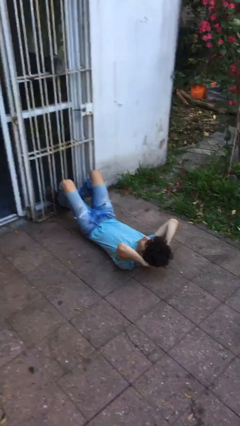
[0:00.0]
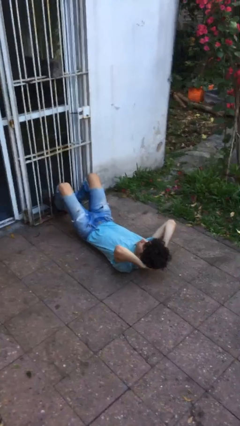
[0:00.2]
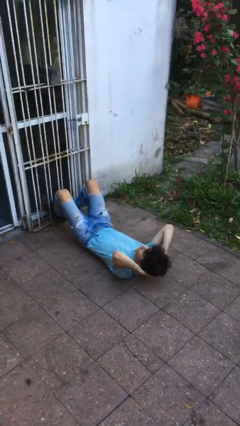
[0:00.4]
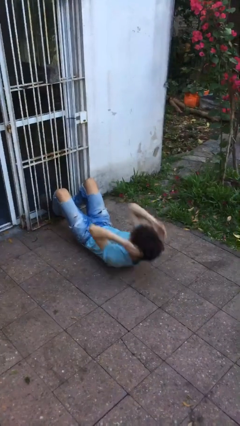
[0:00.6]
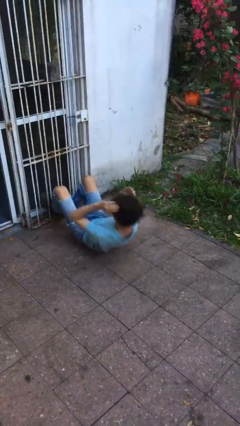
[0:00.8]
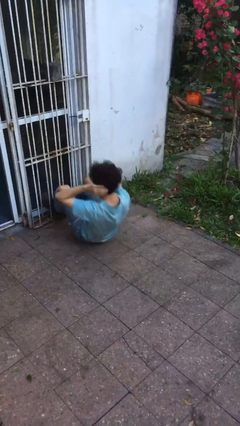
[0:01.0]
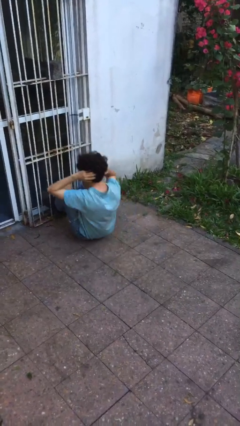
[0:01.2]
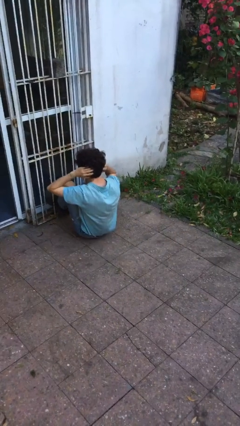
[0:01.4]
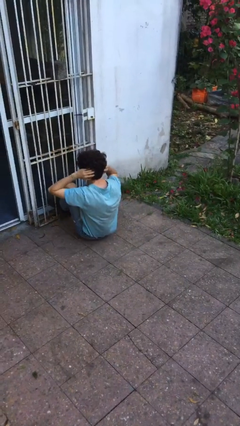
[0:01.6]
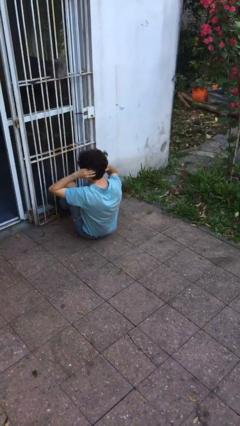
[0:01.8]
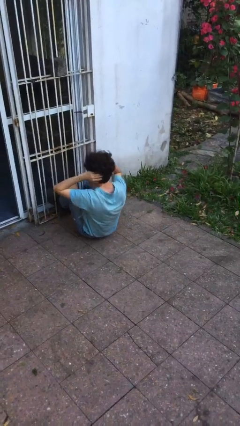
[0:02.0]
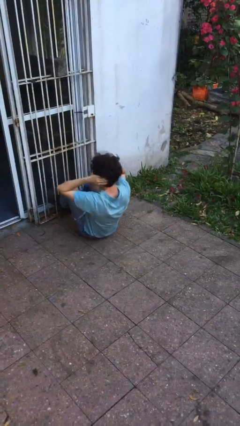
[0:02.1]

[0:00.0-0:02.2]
person exercises with situp

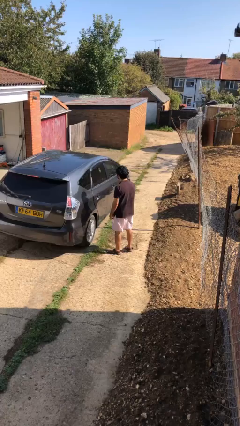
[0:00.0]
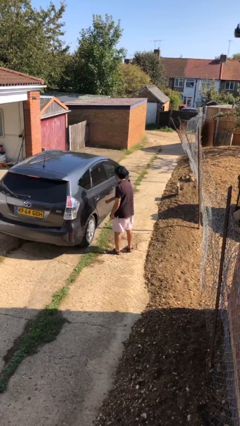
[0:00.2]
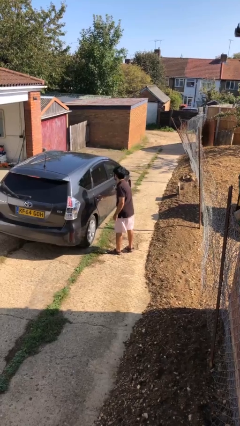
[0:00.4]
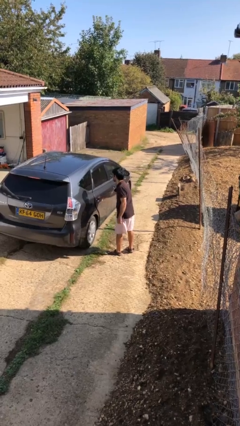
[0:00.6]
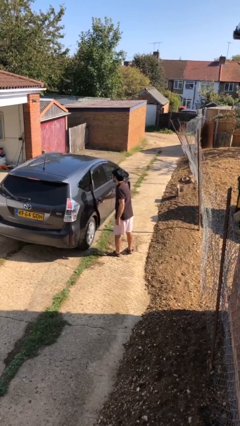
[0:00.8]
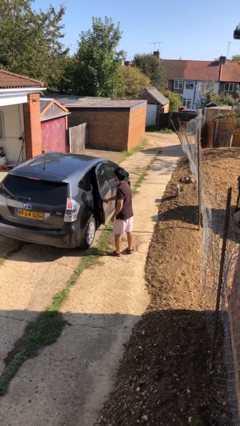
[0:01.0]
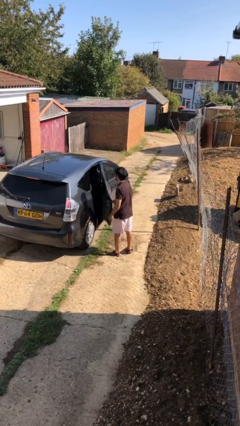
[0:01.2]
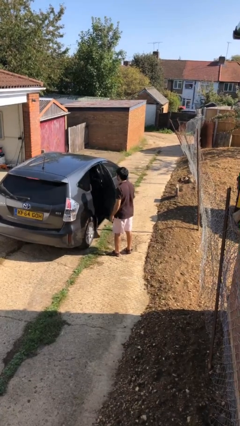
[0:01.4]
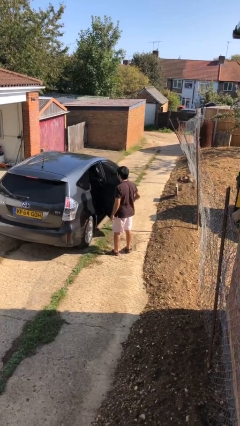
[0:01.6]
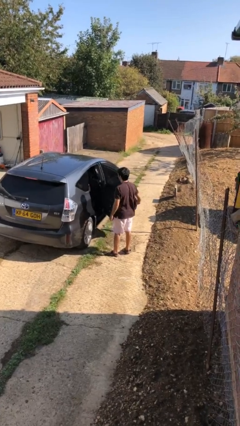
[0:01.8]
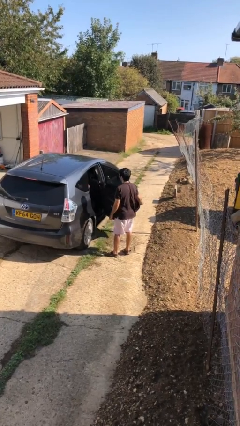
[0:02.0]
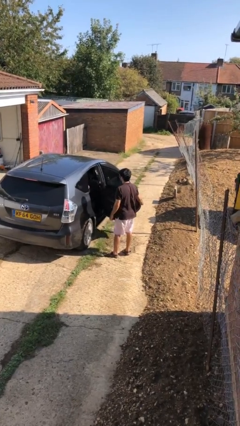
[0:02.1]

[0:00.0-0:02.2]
person opens car door

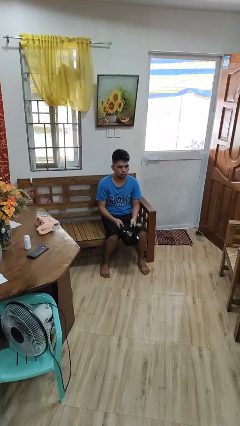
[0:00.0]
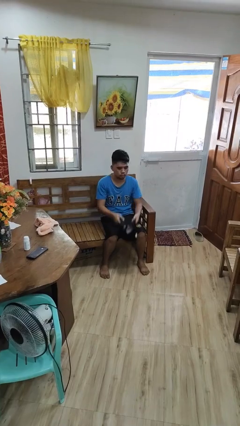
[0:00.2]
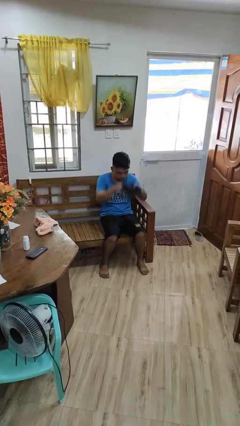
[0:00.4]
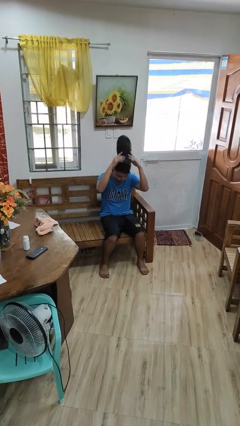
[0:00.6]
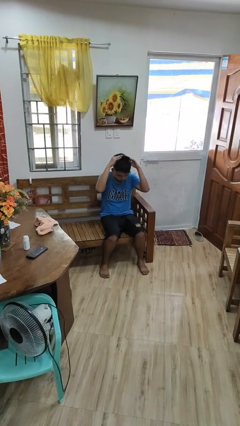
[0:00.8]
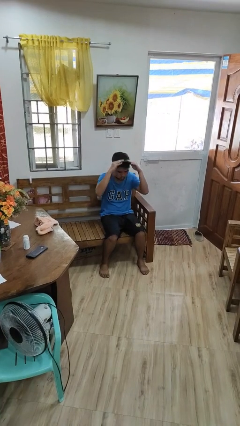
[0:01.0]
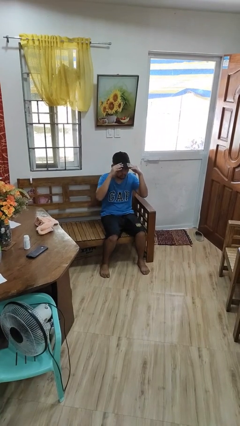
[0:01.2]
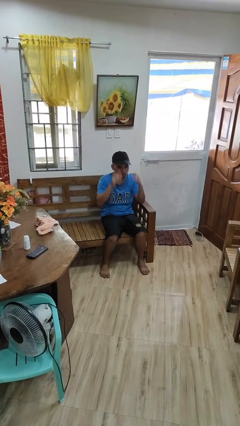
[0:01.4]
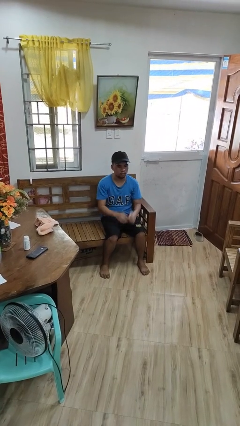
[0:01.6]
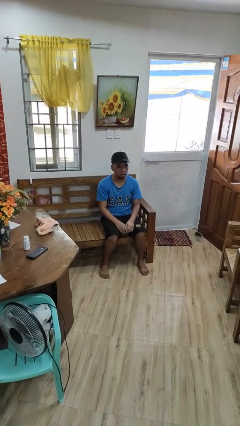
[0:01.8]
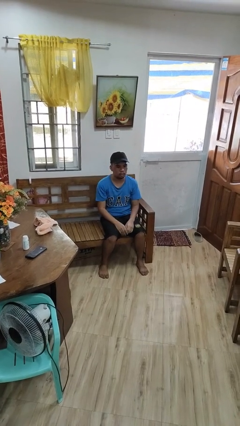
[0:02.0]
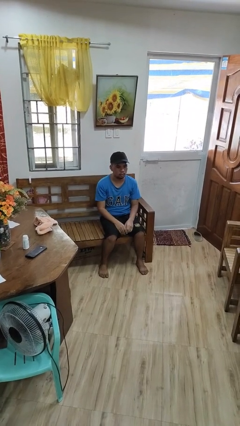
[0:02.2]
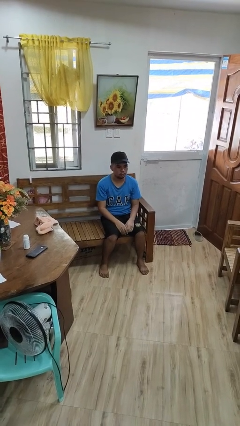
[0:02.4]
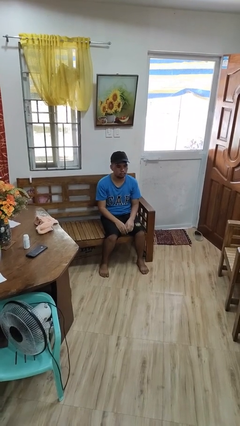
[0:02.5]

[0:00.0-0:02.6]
person puts on hat

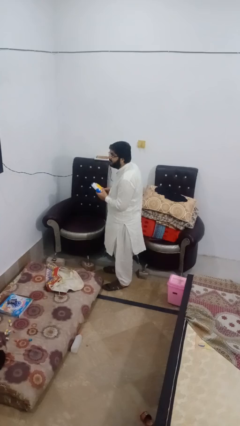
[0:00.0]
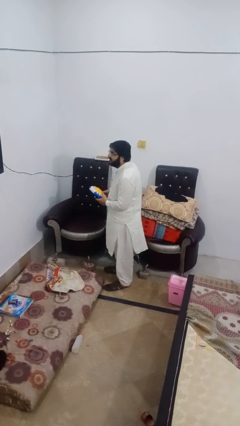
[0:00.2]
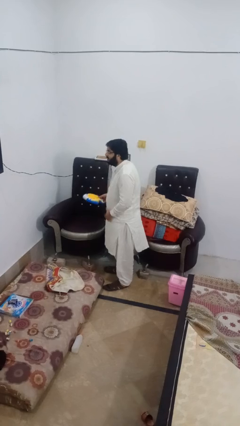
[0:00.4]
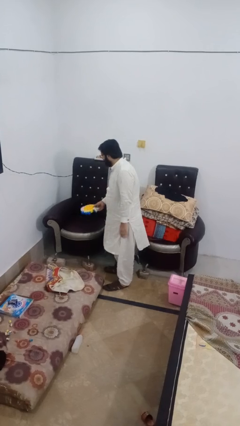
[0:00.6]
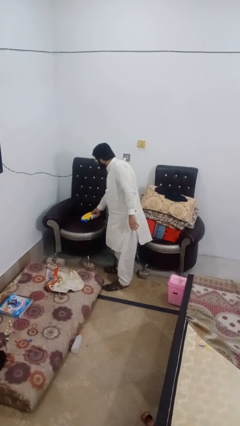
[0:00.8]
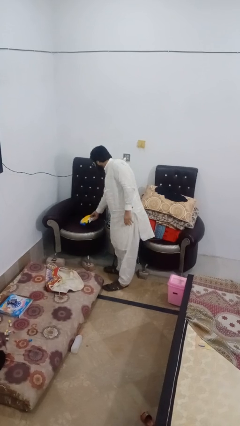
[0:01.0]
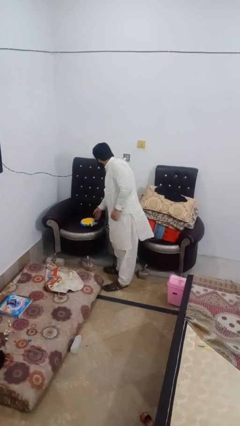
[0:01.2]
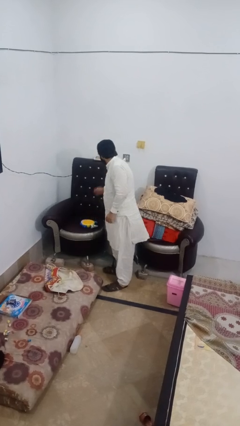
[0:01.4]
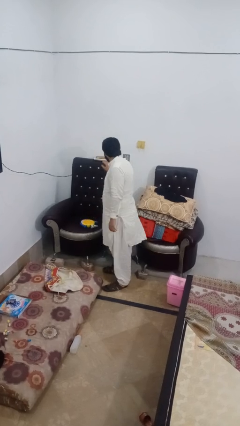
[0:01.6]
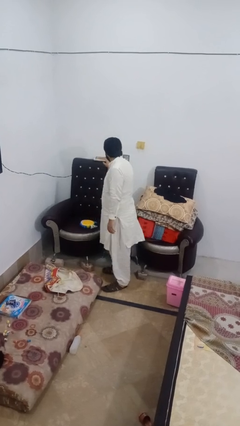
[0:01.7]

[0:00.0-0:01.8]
person puts down object on couch

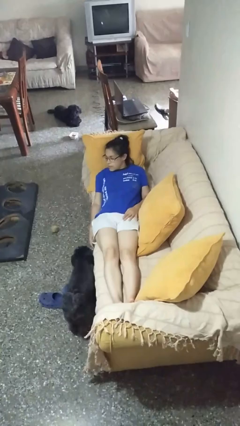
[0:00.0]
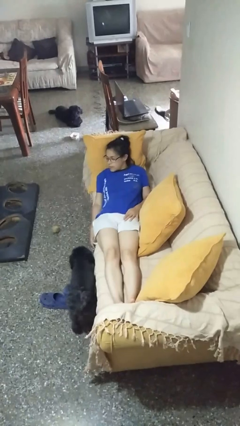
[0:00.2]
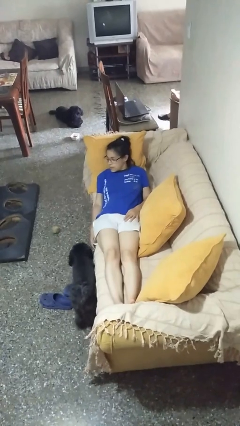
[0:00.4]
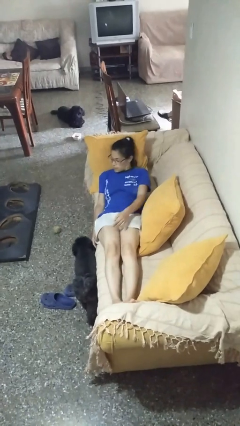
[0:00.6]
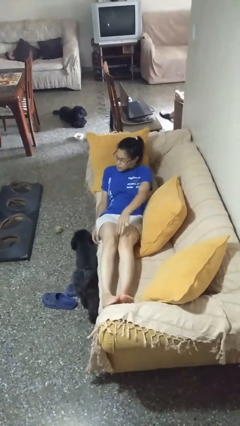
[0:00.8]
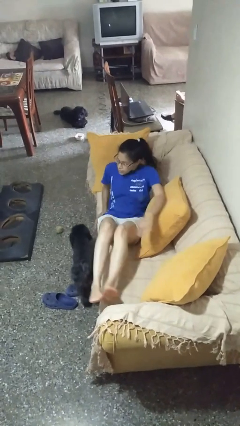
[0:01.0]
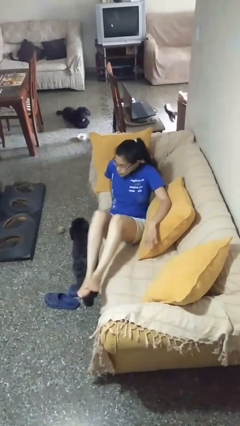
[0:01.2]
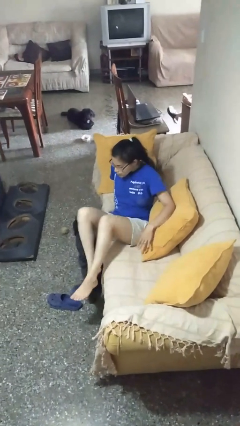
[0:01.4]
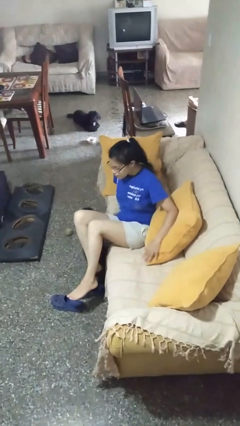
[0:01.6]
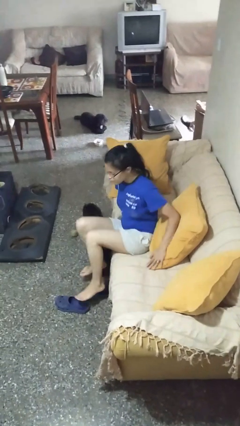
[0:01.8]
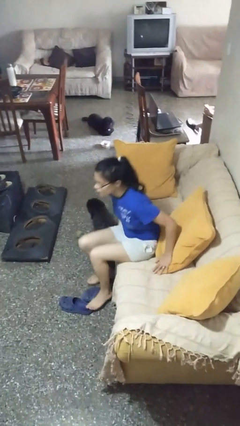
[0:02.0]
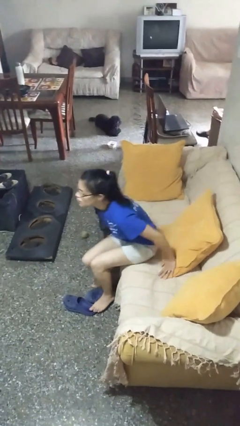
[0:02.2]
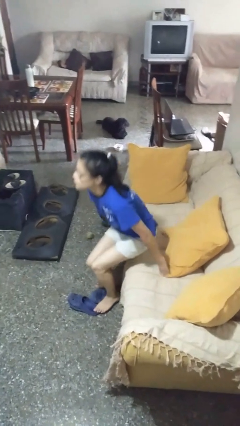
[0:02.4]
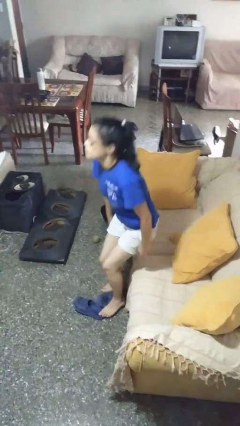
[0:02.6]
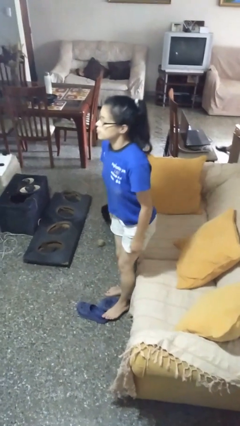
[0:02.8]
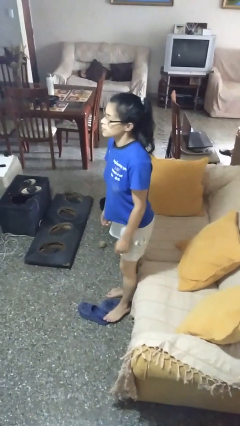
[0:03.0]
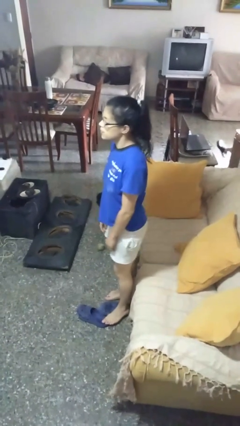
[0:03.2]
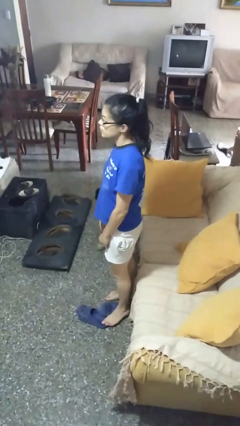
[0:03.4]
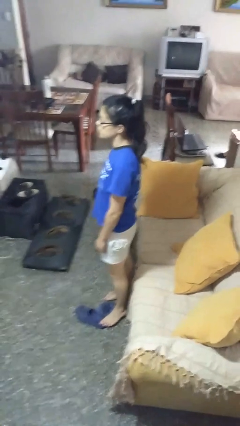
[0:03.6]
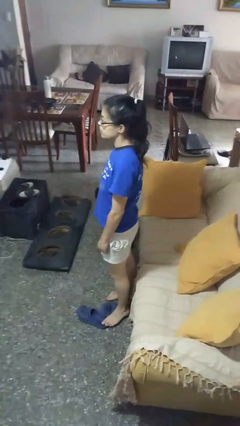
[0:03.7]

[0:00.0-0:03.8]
person stands up

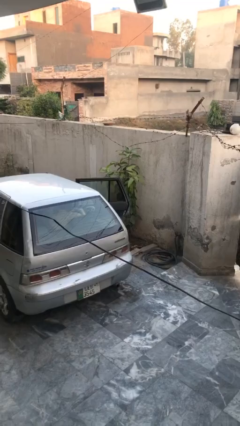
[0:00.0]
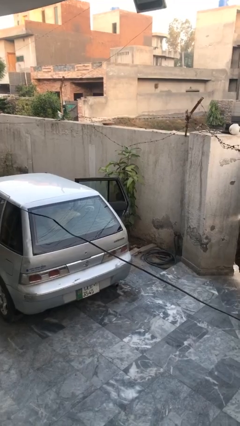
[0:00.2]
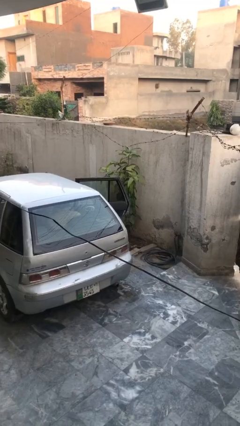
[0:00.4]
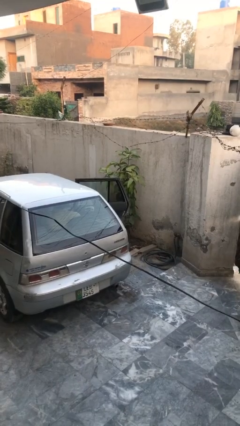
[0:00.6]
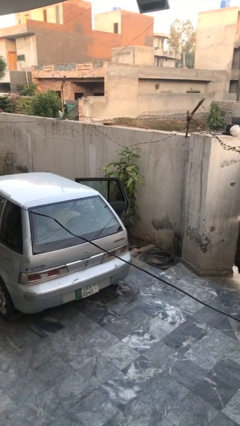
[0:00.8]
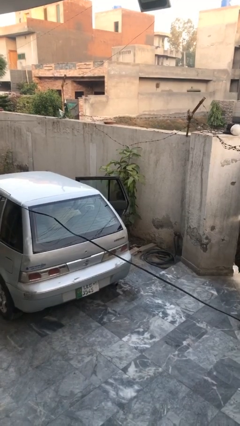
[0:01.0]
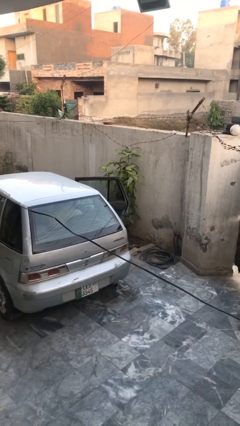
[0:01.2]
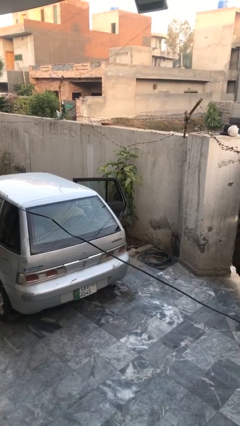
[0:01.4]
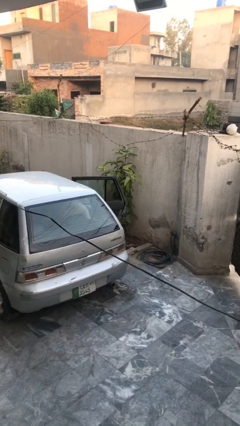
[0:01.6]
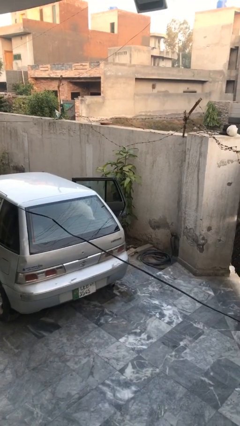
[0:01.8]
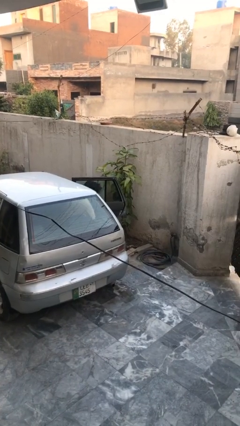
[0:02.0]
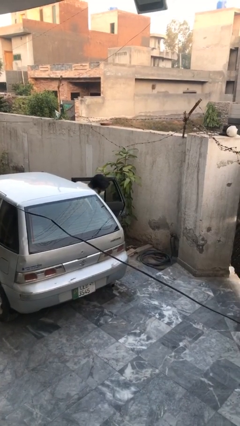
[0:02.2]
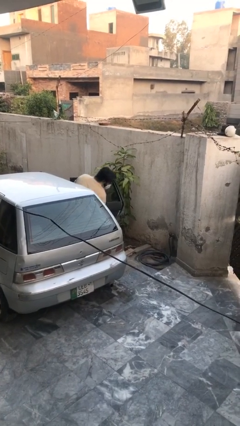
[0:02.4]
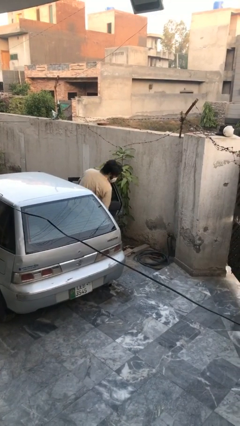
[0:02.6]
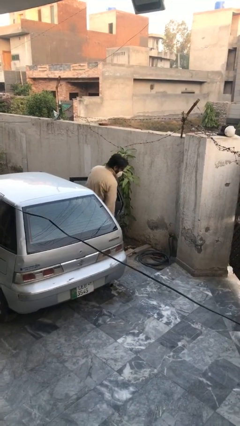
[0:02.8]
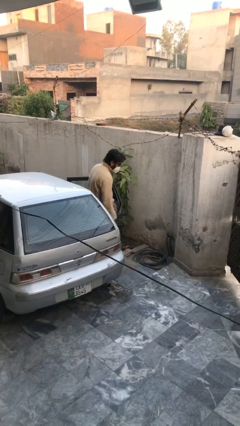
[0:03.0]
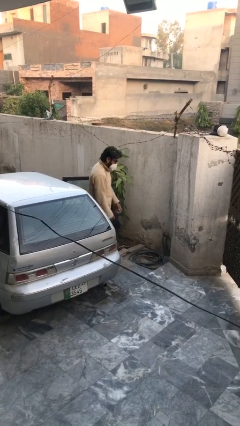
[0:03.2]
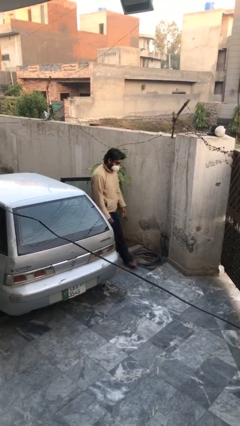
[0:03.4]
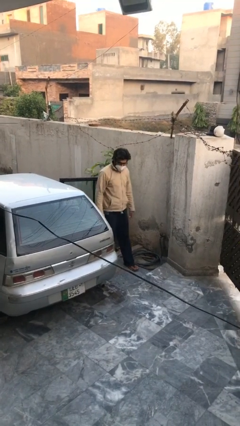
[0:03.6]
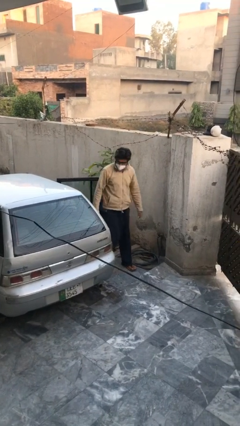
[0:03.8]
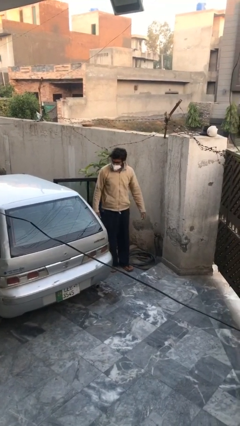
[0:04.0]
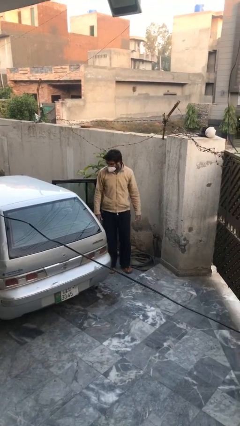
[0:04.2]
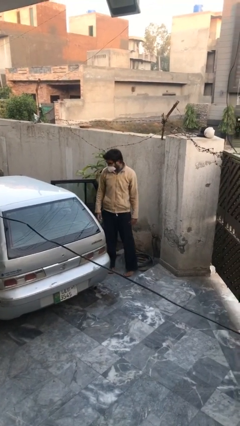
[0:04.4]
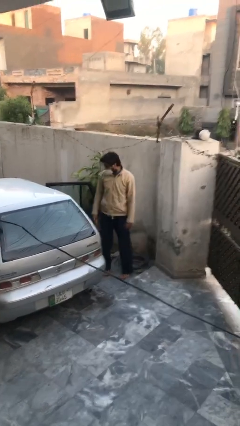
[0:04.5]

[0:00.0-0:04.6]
person exits car

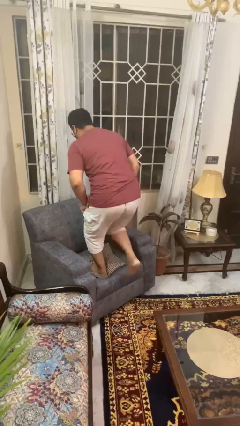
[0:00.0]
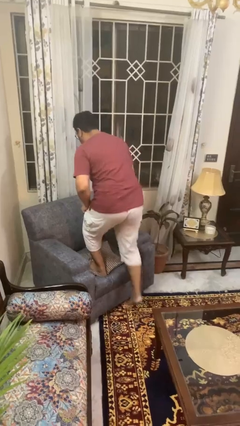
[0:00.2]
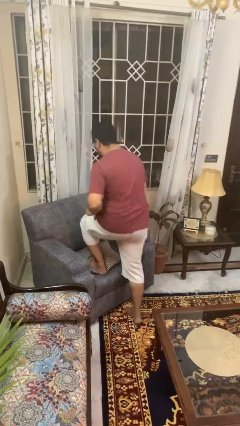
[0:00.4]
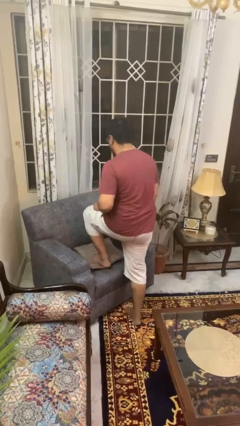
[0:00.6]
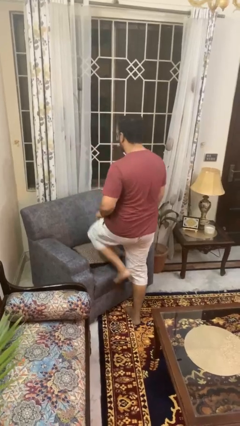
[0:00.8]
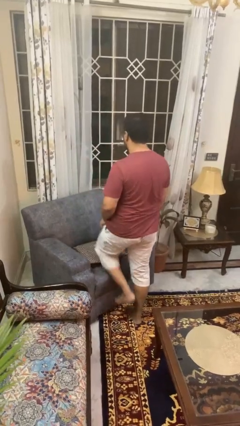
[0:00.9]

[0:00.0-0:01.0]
person climbs off couch
